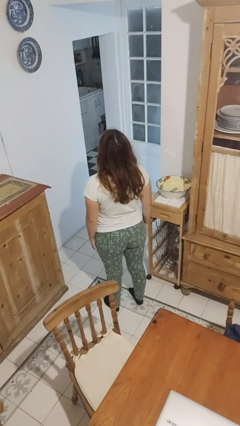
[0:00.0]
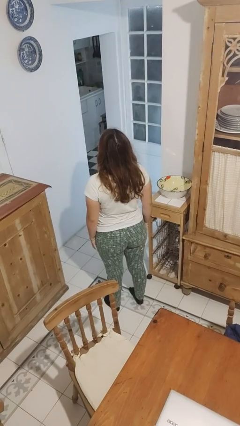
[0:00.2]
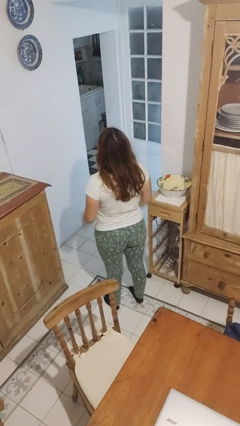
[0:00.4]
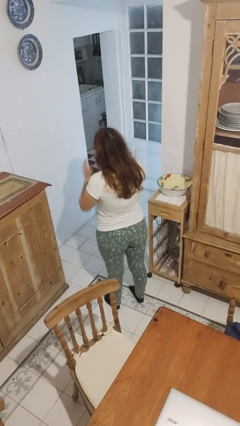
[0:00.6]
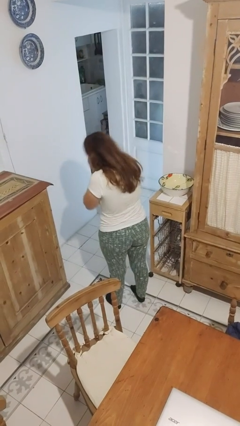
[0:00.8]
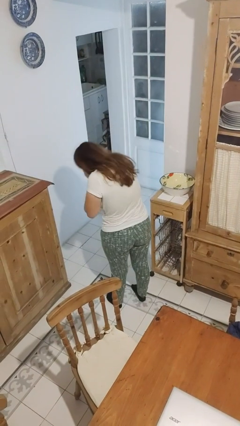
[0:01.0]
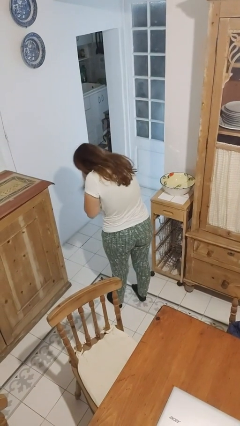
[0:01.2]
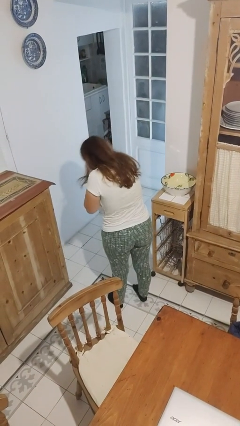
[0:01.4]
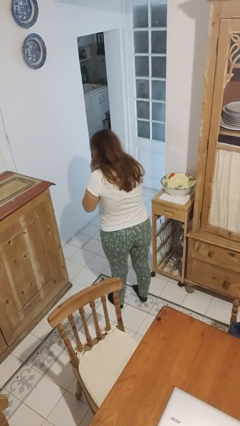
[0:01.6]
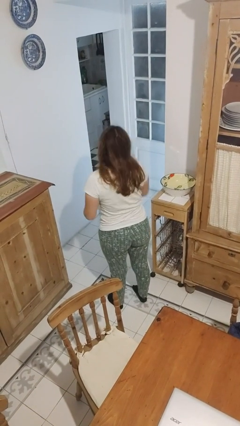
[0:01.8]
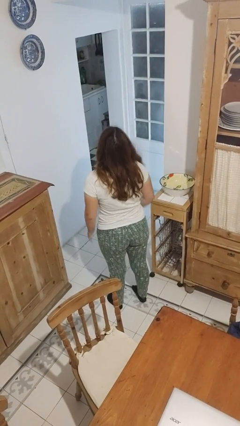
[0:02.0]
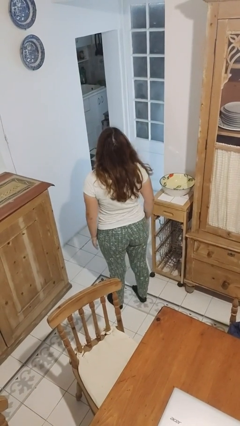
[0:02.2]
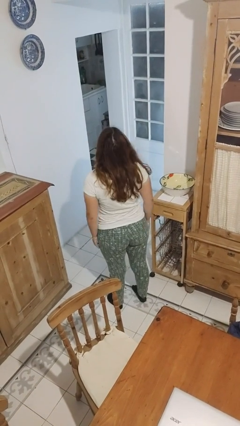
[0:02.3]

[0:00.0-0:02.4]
person sneezes into hand

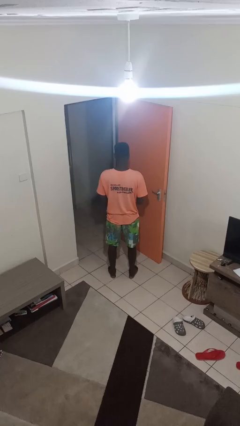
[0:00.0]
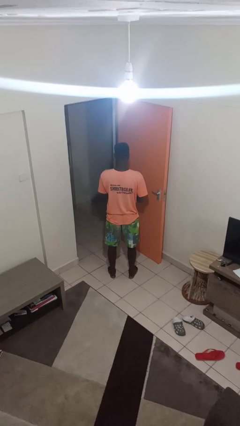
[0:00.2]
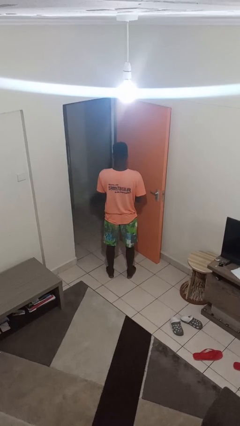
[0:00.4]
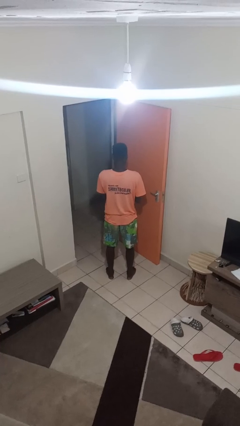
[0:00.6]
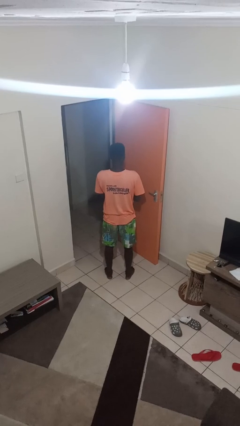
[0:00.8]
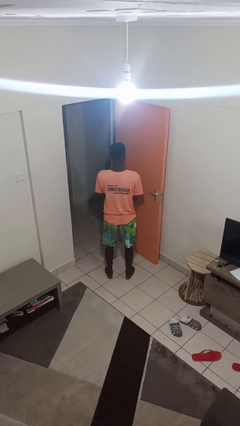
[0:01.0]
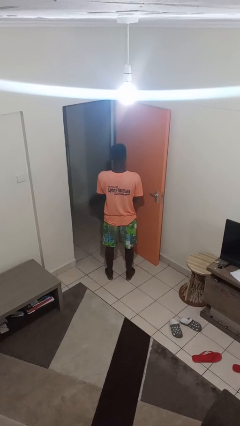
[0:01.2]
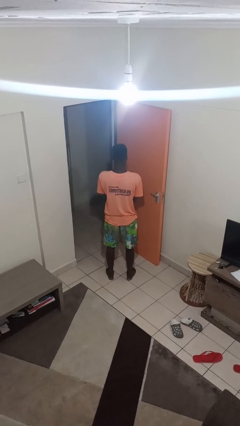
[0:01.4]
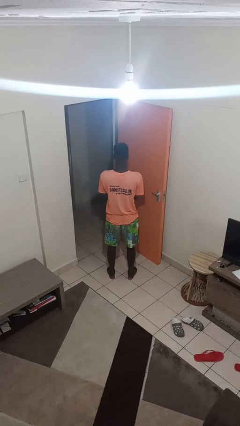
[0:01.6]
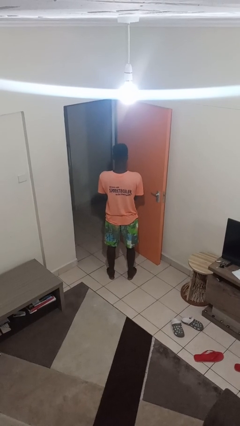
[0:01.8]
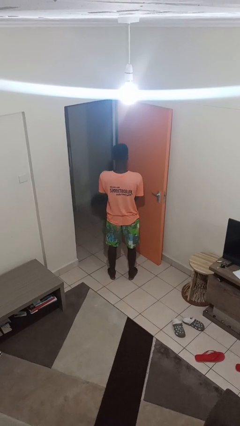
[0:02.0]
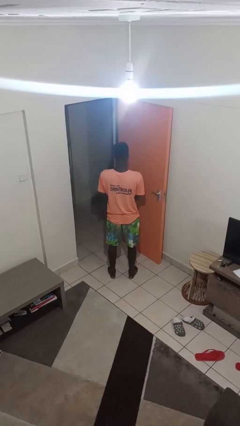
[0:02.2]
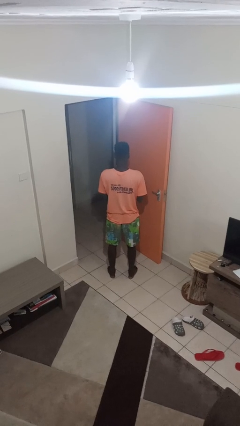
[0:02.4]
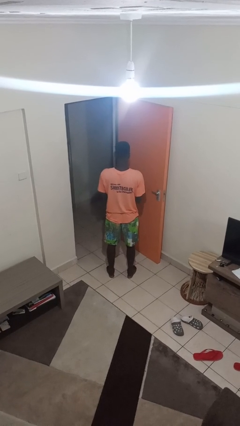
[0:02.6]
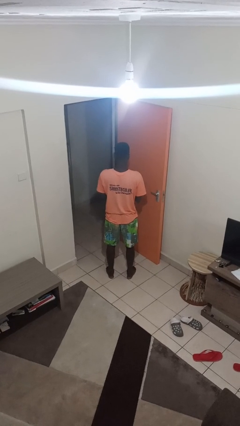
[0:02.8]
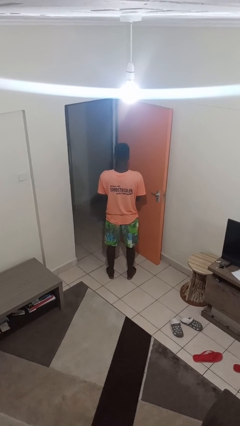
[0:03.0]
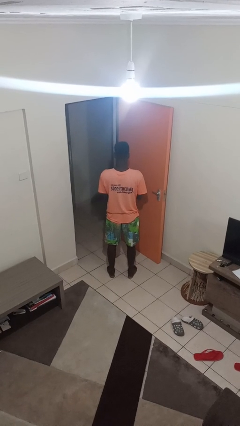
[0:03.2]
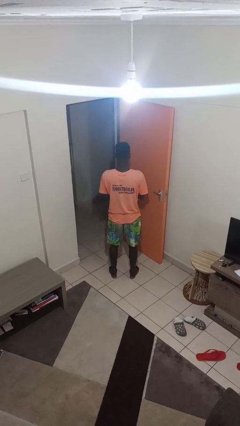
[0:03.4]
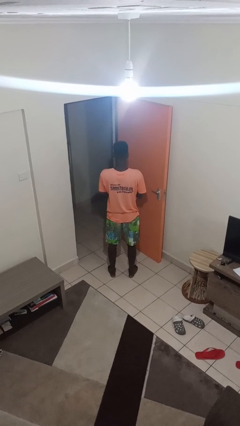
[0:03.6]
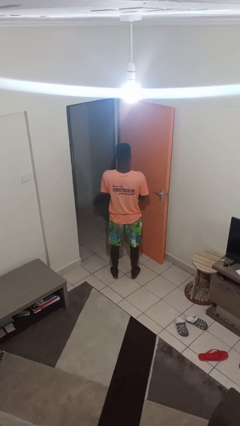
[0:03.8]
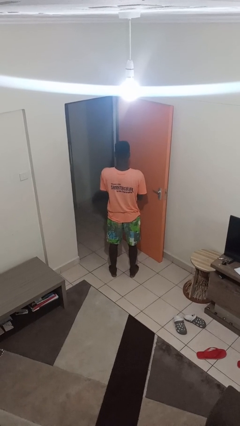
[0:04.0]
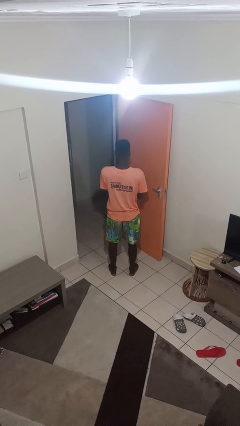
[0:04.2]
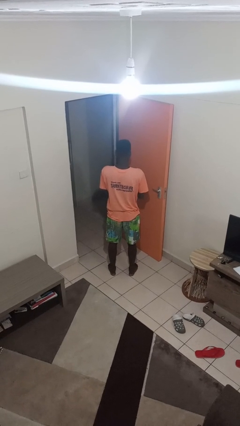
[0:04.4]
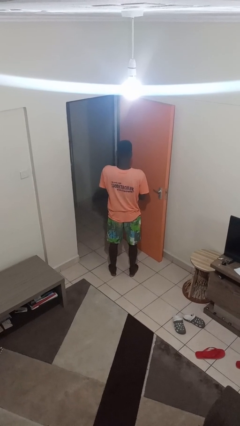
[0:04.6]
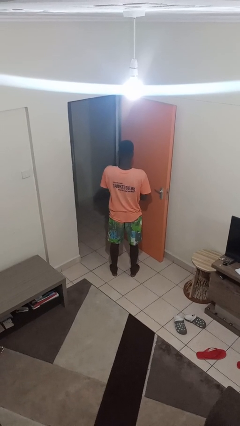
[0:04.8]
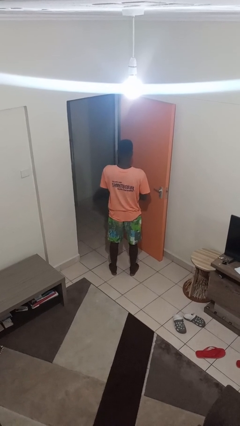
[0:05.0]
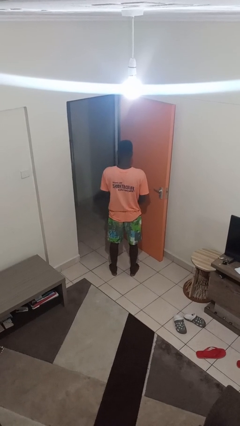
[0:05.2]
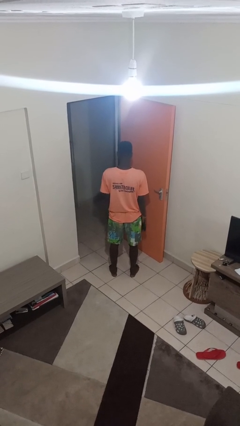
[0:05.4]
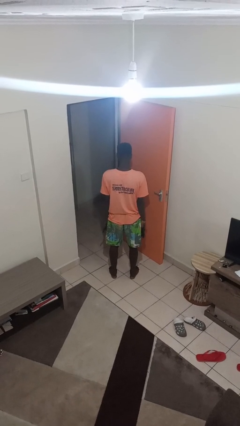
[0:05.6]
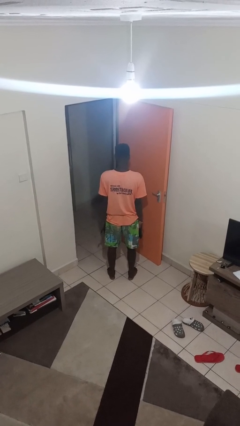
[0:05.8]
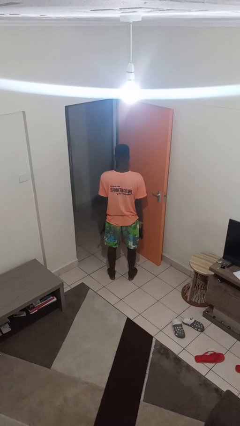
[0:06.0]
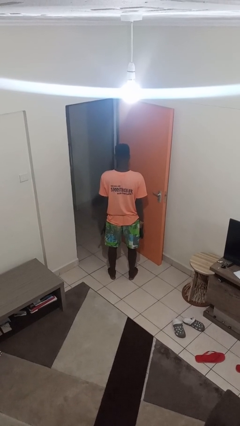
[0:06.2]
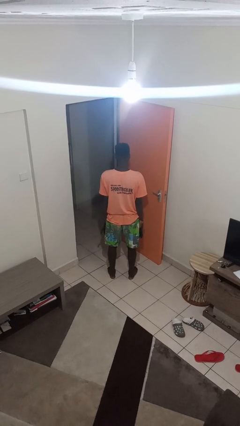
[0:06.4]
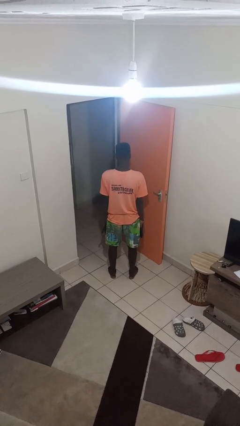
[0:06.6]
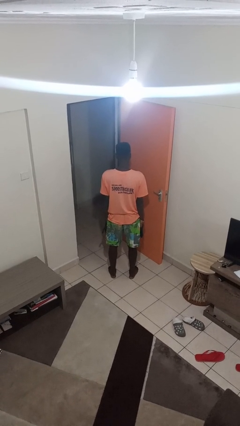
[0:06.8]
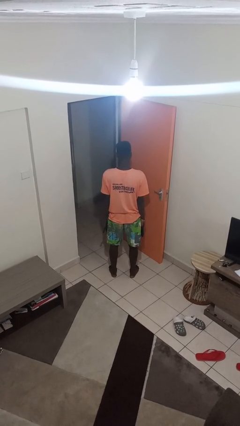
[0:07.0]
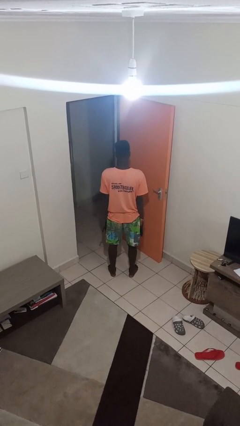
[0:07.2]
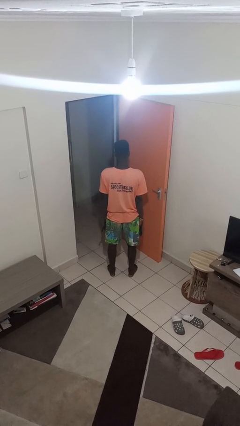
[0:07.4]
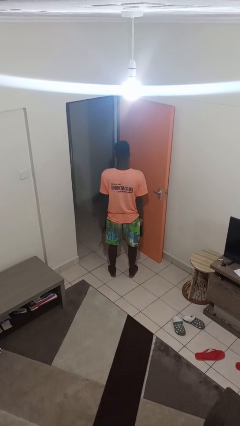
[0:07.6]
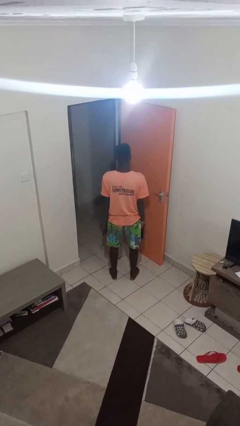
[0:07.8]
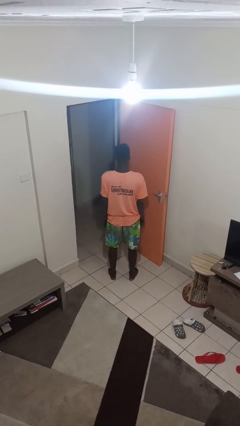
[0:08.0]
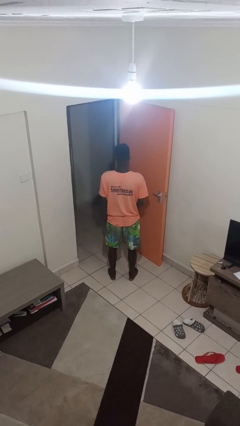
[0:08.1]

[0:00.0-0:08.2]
person puts on gloves

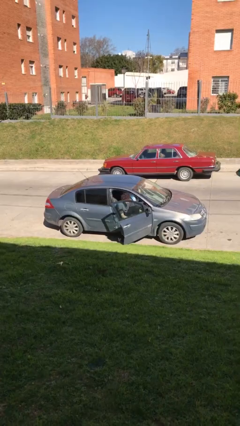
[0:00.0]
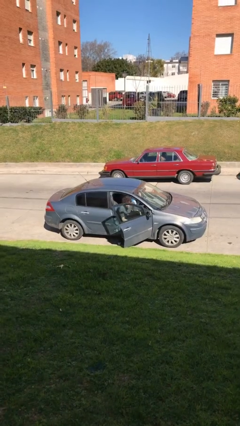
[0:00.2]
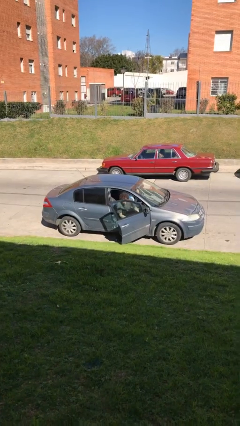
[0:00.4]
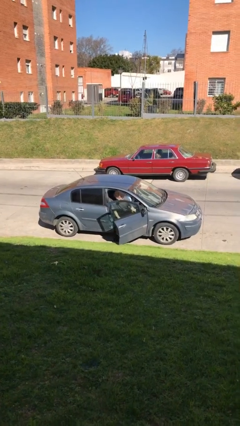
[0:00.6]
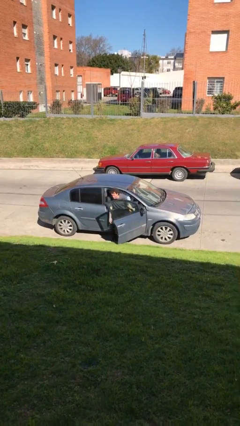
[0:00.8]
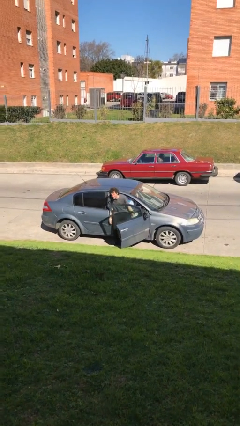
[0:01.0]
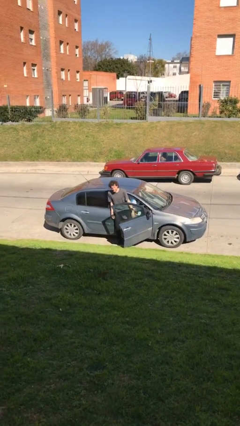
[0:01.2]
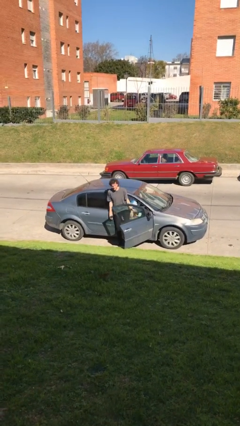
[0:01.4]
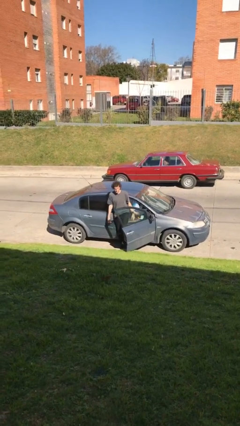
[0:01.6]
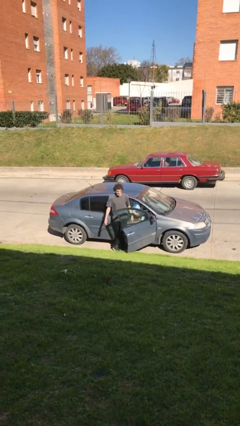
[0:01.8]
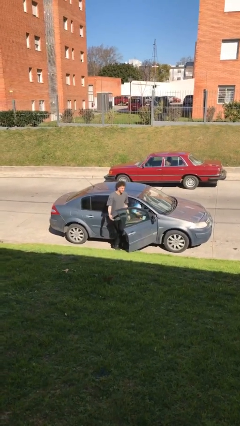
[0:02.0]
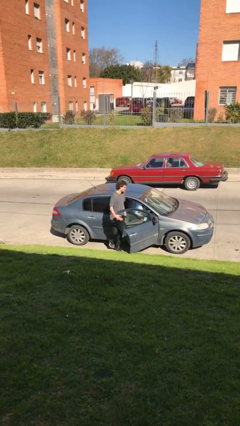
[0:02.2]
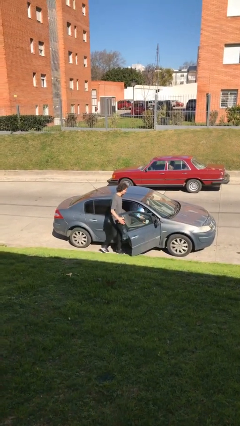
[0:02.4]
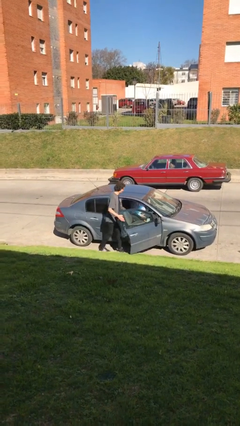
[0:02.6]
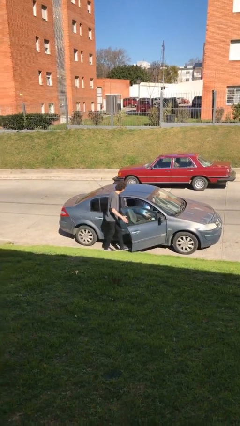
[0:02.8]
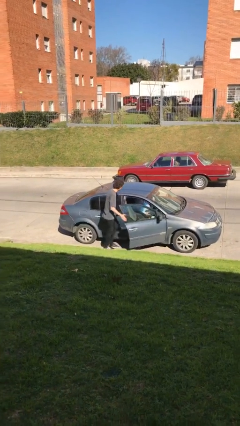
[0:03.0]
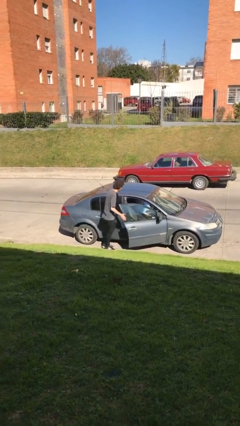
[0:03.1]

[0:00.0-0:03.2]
person exits car

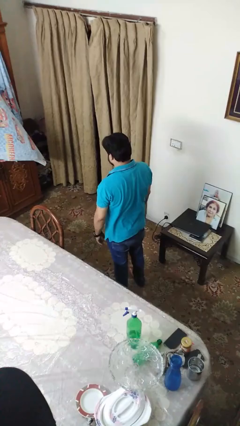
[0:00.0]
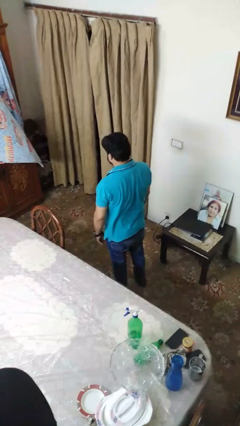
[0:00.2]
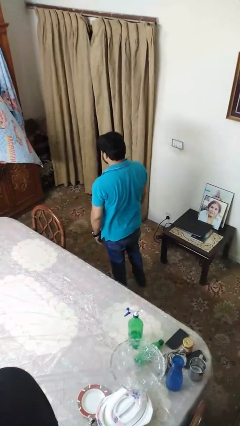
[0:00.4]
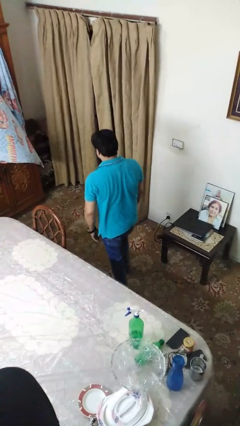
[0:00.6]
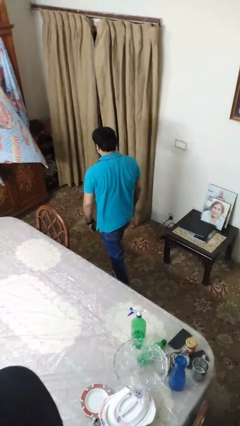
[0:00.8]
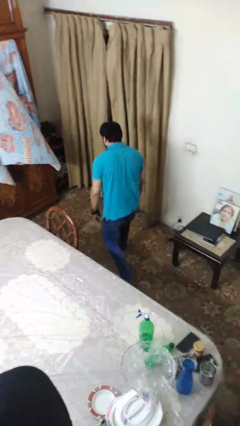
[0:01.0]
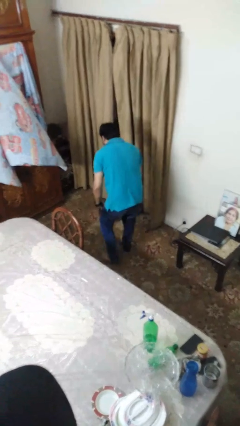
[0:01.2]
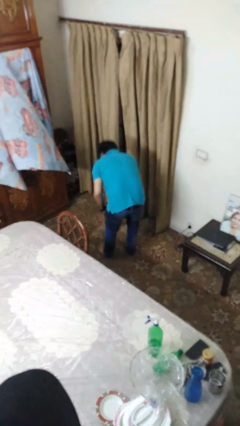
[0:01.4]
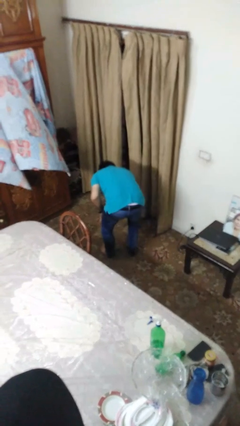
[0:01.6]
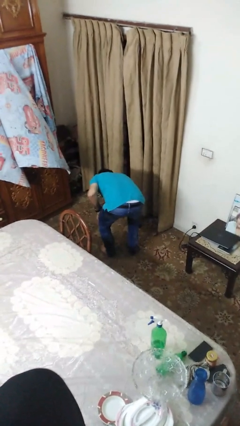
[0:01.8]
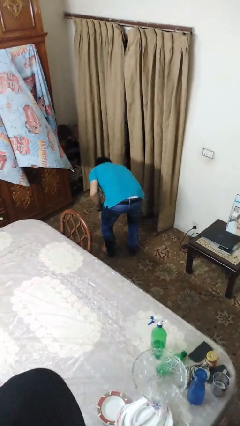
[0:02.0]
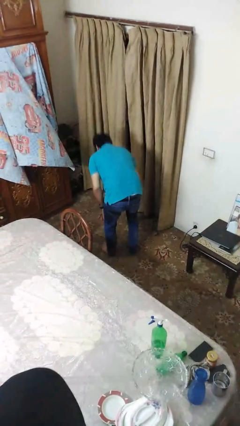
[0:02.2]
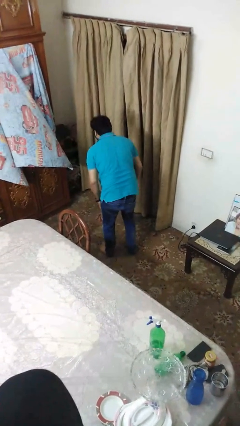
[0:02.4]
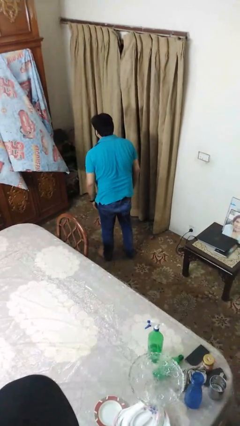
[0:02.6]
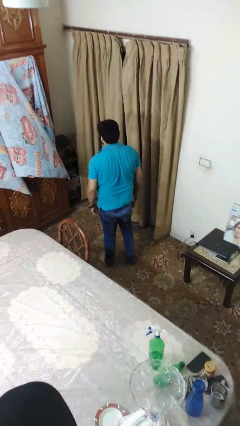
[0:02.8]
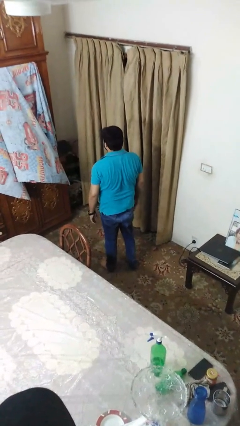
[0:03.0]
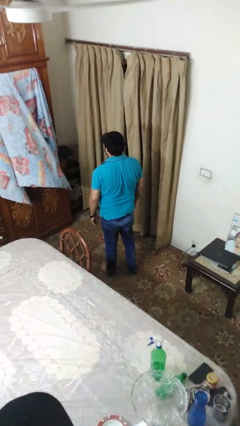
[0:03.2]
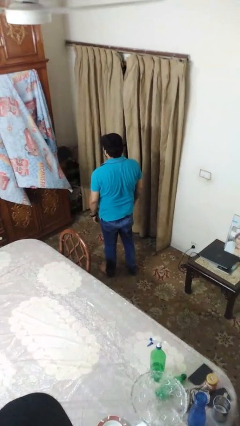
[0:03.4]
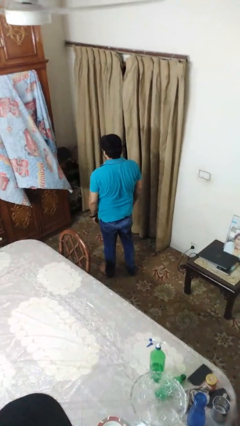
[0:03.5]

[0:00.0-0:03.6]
person picks up object from floor

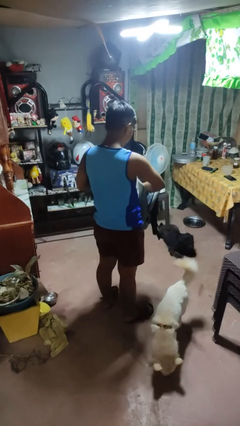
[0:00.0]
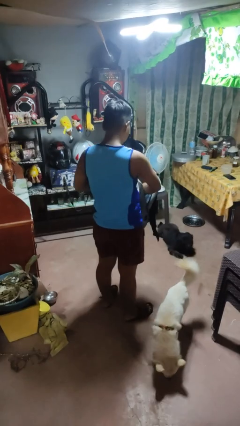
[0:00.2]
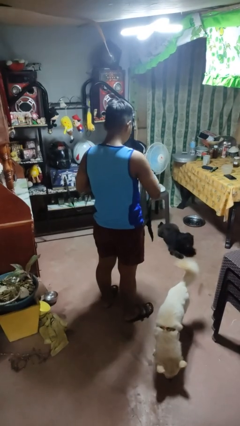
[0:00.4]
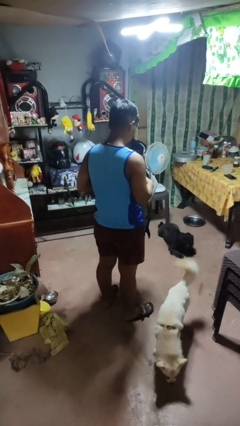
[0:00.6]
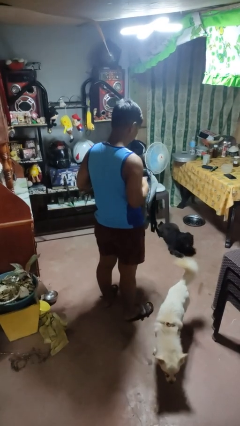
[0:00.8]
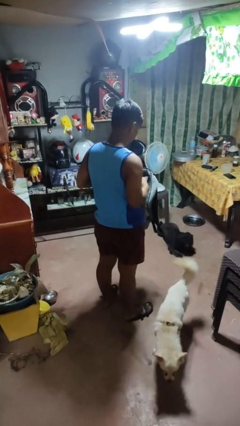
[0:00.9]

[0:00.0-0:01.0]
person puts object into bag
